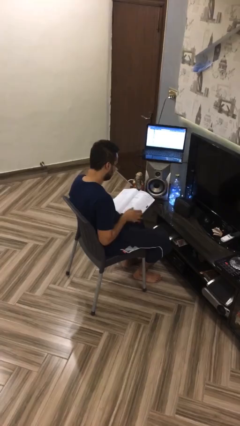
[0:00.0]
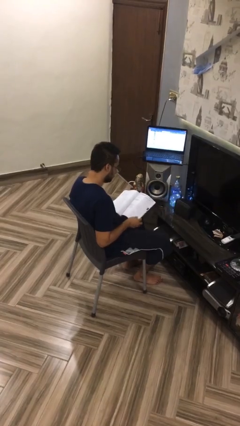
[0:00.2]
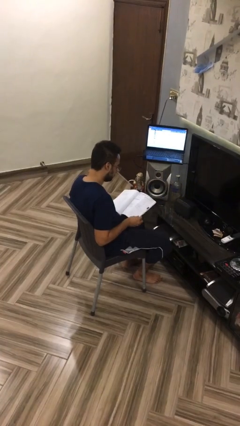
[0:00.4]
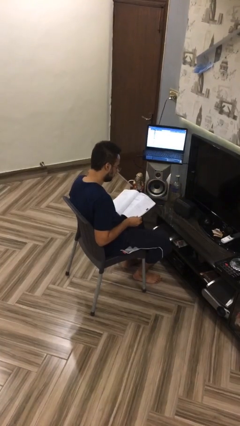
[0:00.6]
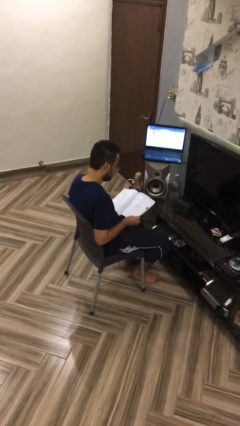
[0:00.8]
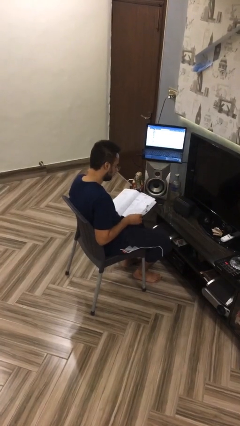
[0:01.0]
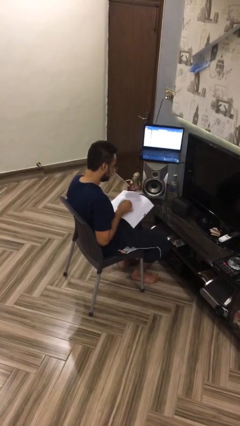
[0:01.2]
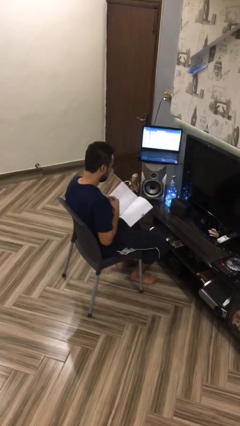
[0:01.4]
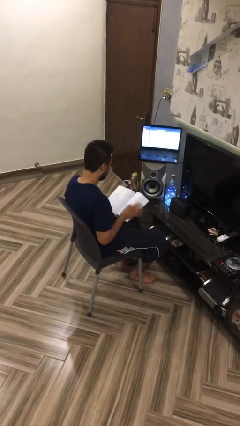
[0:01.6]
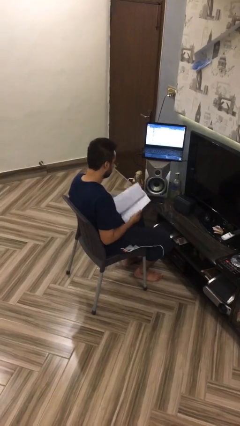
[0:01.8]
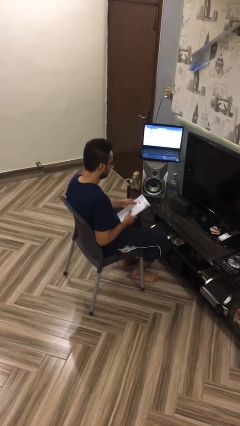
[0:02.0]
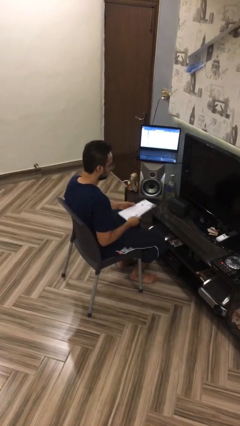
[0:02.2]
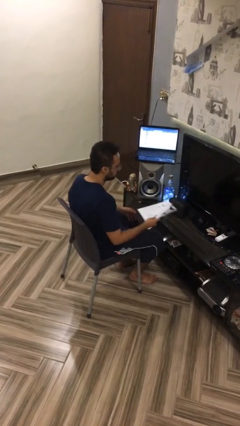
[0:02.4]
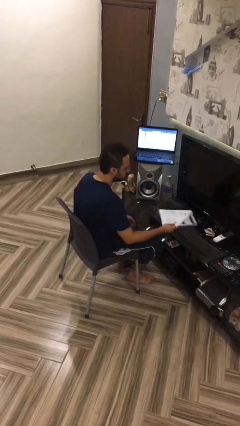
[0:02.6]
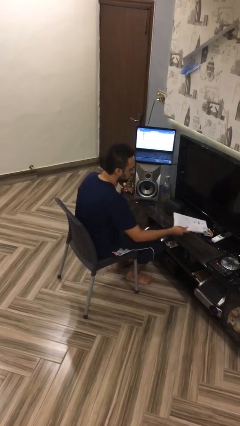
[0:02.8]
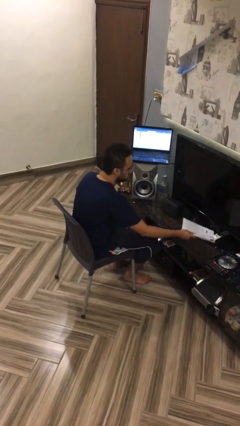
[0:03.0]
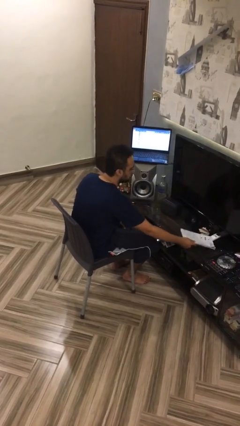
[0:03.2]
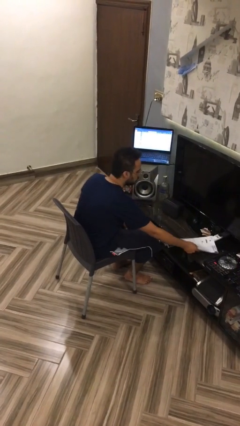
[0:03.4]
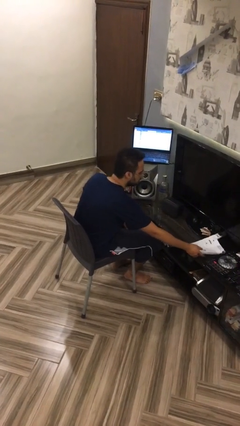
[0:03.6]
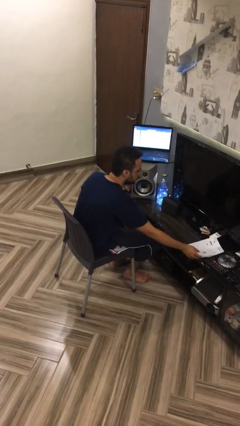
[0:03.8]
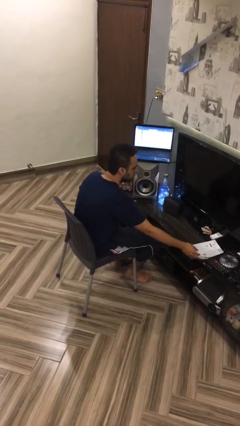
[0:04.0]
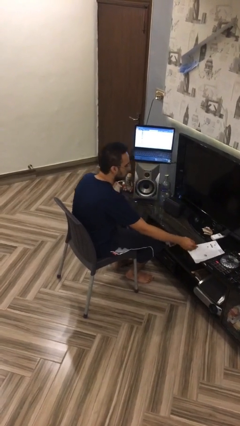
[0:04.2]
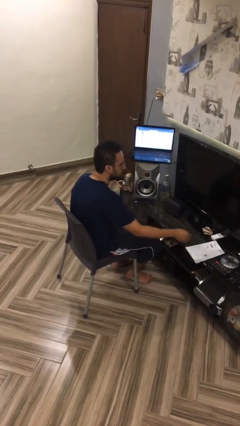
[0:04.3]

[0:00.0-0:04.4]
person puts down object on table

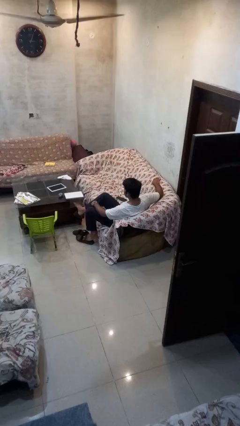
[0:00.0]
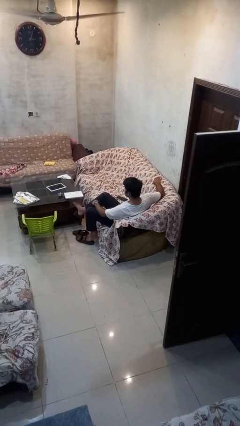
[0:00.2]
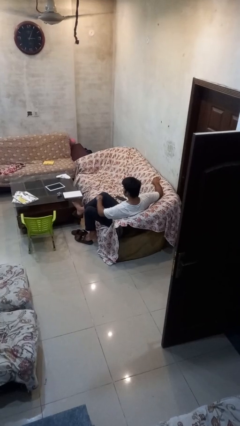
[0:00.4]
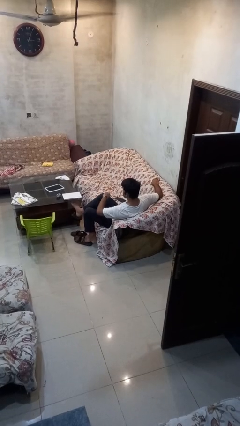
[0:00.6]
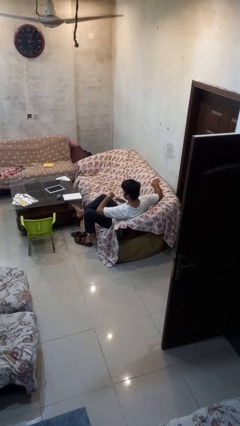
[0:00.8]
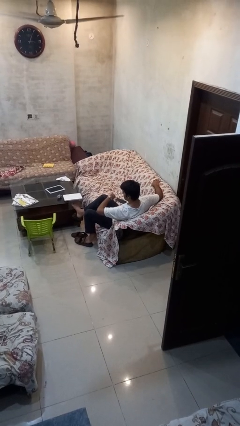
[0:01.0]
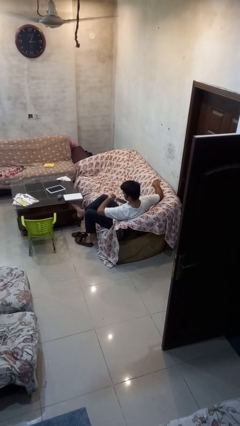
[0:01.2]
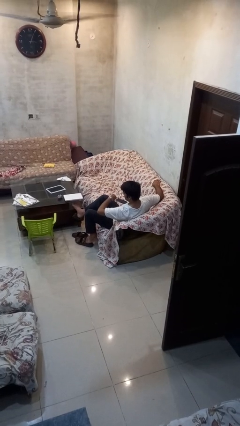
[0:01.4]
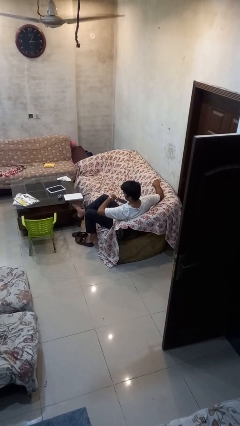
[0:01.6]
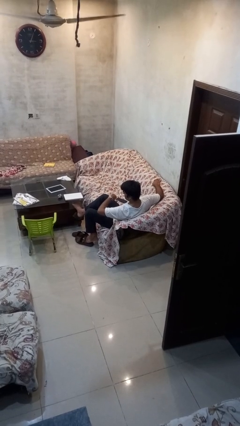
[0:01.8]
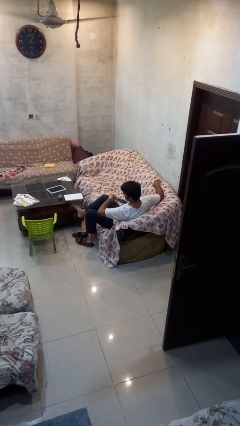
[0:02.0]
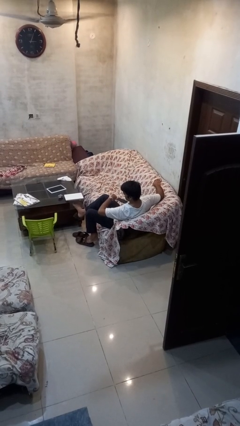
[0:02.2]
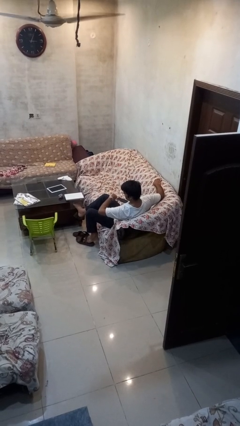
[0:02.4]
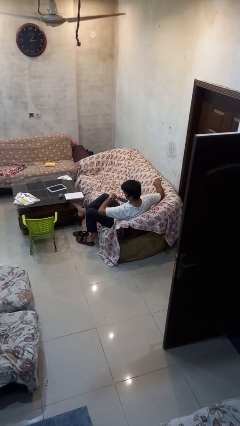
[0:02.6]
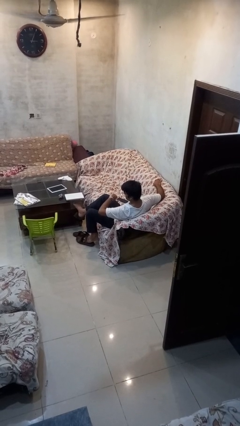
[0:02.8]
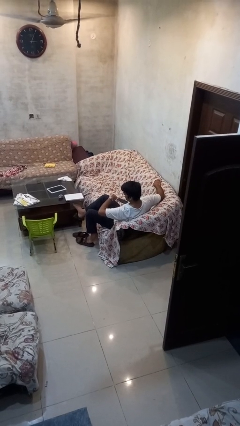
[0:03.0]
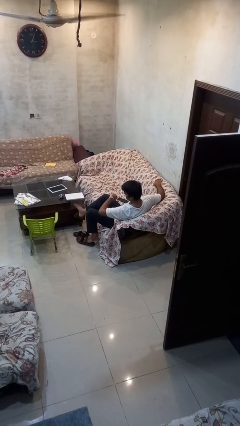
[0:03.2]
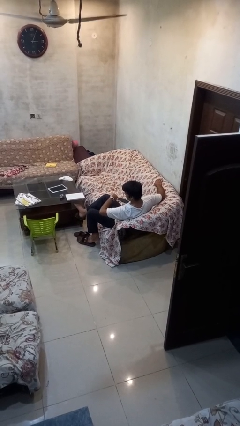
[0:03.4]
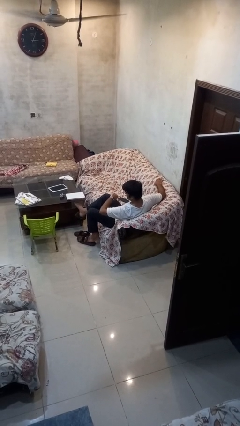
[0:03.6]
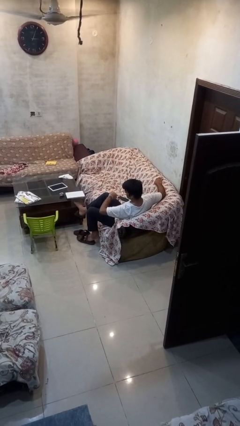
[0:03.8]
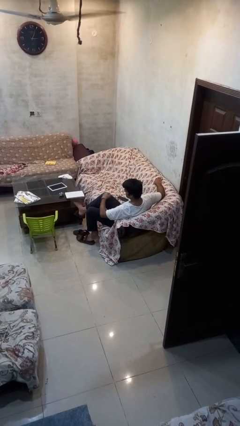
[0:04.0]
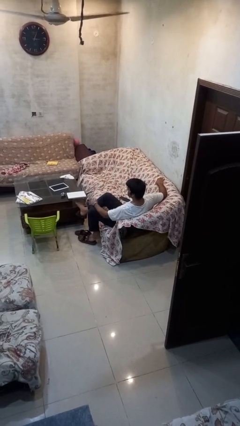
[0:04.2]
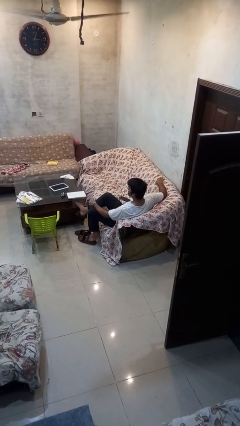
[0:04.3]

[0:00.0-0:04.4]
person looks at wristwatch

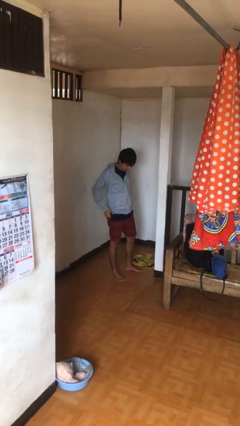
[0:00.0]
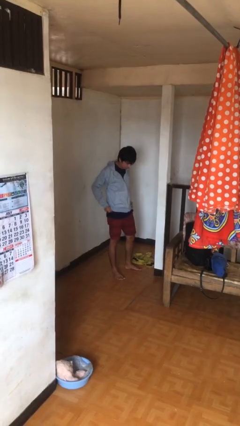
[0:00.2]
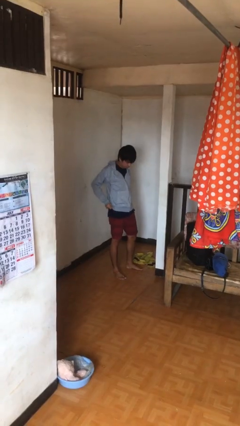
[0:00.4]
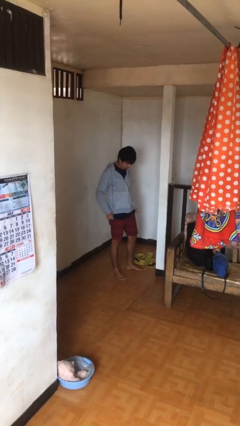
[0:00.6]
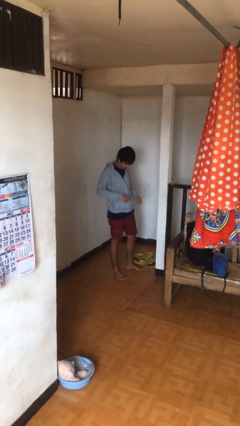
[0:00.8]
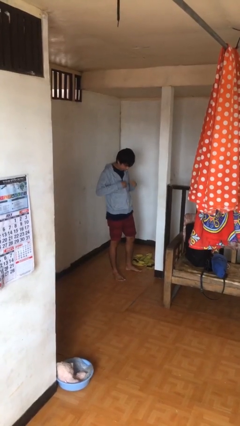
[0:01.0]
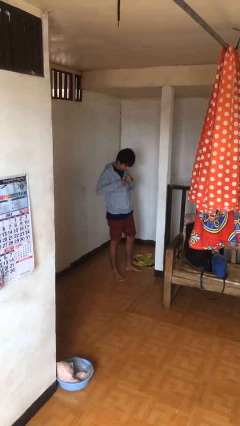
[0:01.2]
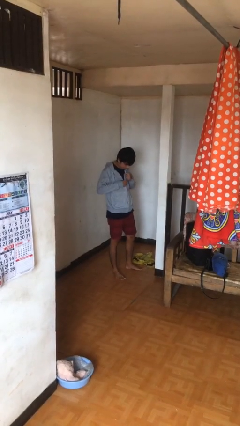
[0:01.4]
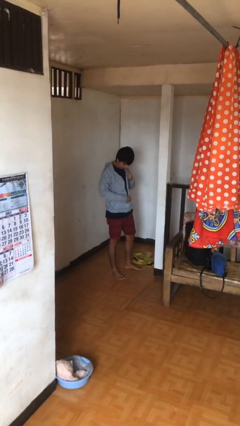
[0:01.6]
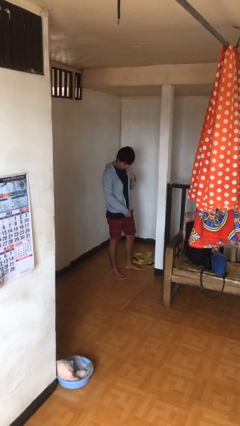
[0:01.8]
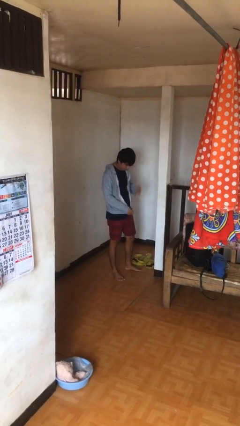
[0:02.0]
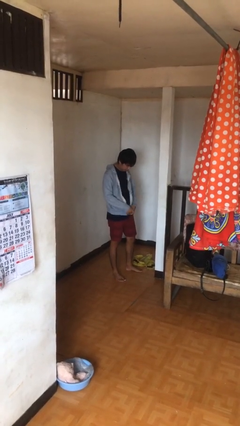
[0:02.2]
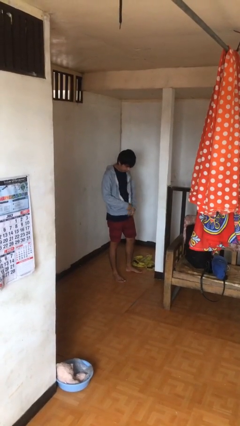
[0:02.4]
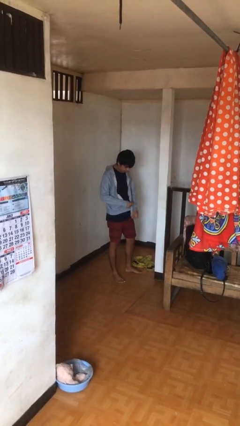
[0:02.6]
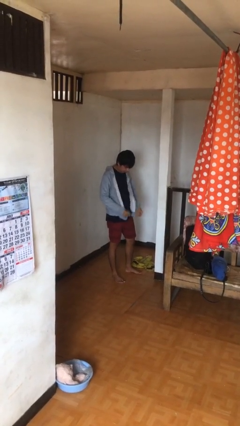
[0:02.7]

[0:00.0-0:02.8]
person unzips jacket

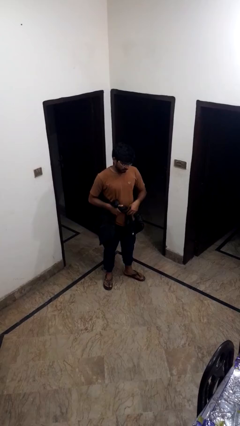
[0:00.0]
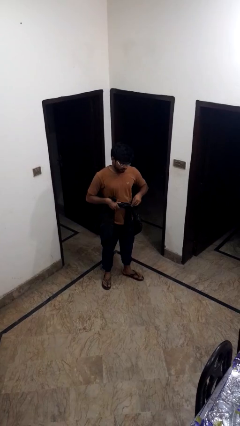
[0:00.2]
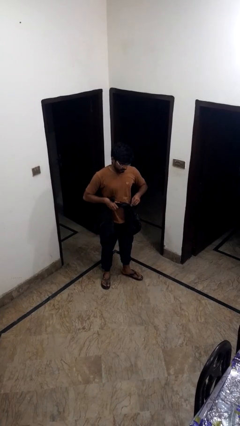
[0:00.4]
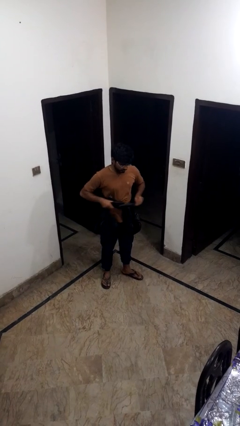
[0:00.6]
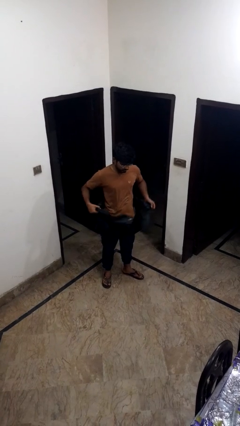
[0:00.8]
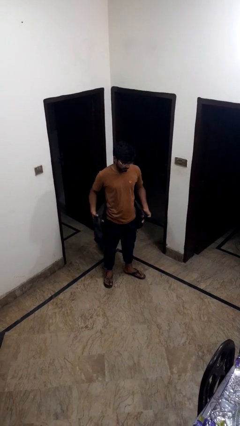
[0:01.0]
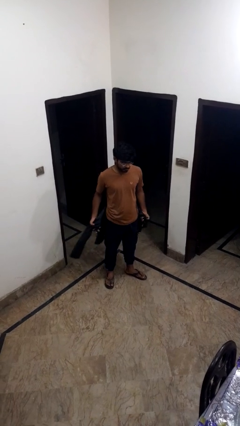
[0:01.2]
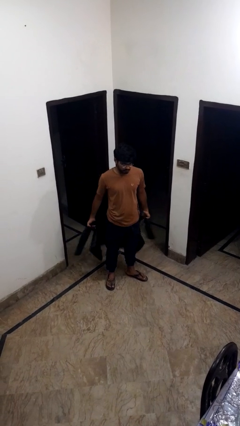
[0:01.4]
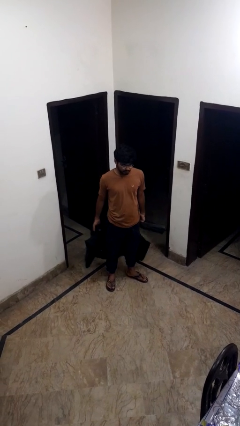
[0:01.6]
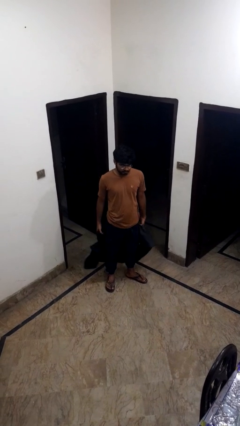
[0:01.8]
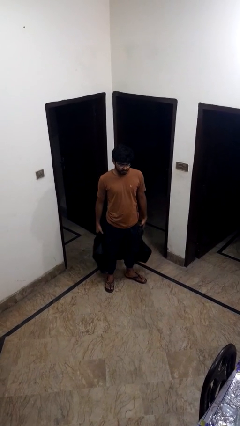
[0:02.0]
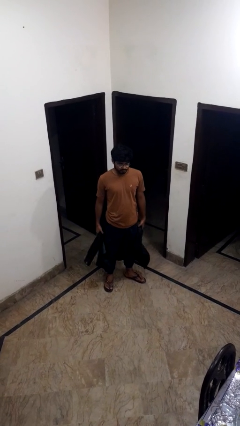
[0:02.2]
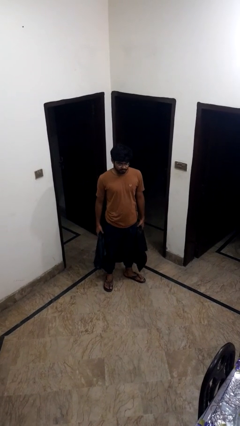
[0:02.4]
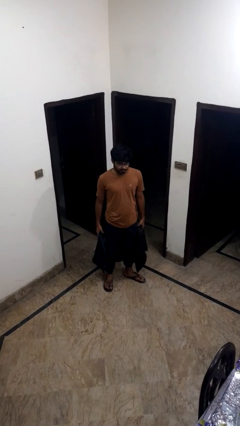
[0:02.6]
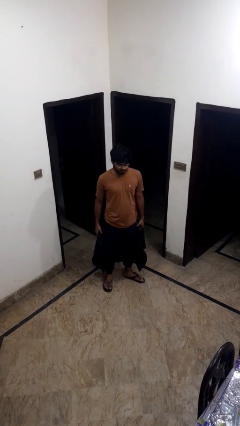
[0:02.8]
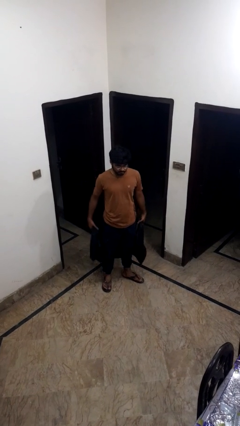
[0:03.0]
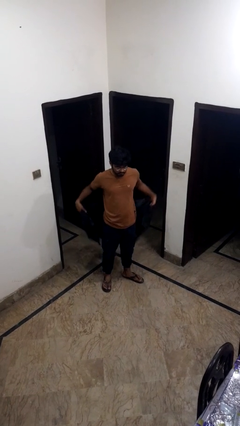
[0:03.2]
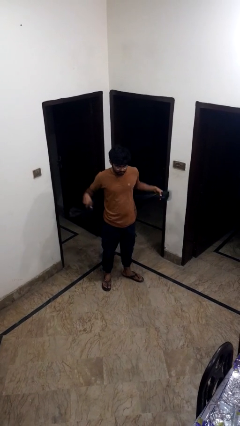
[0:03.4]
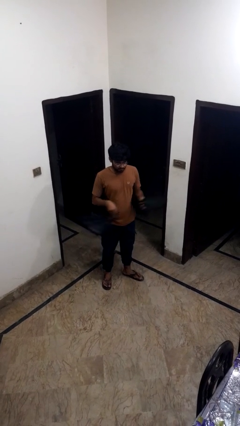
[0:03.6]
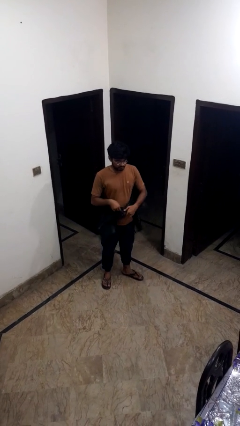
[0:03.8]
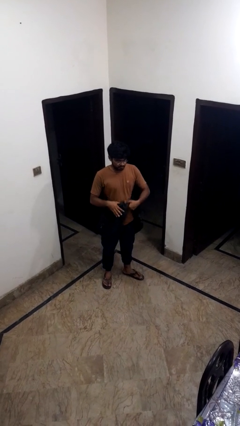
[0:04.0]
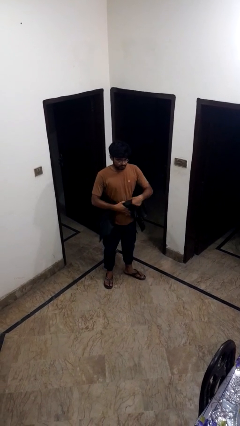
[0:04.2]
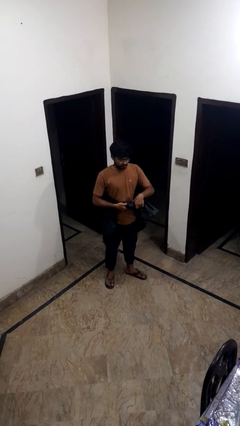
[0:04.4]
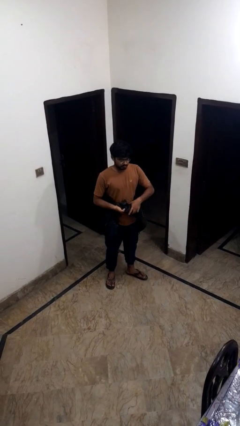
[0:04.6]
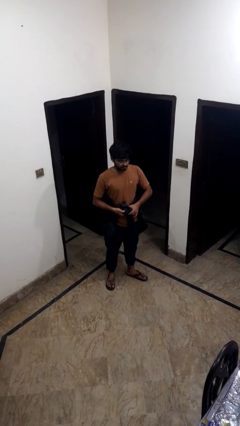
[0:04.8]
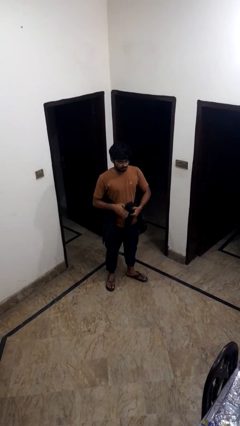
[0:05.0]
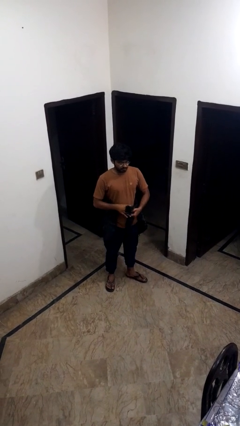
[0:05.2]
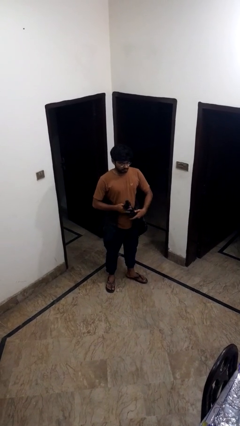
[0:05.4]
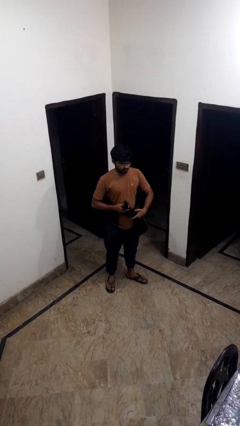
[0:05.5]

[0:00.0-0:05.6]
person carries bicycle

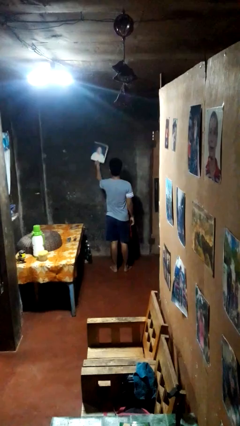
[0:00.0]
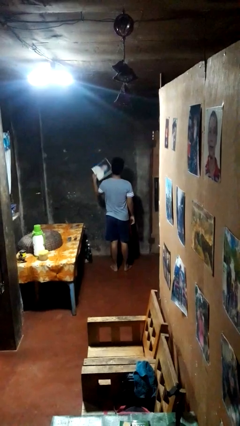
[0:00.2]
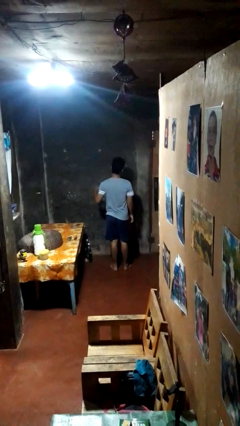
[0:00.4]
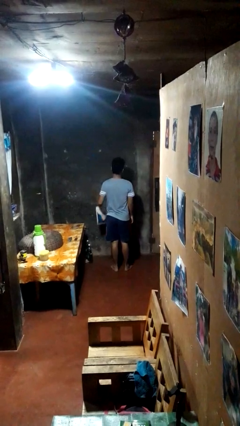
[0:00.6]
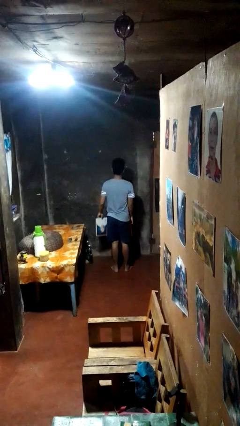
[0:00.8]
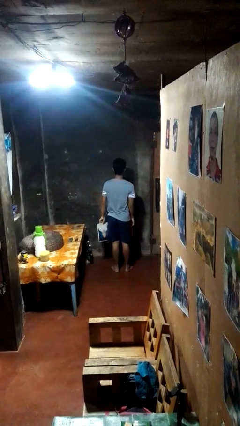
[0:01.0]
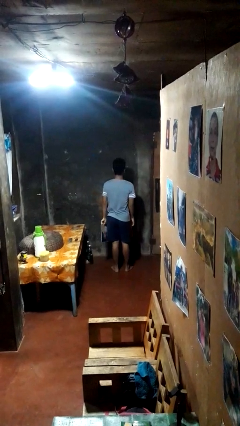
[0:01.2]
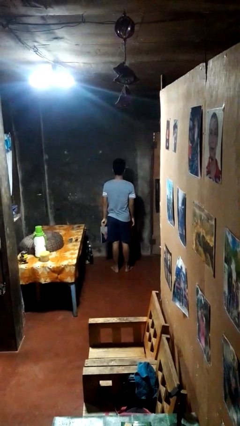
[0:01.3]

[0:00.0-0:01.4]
person takes down picture frame
